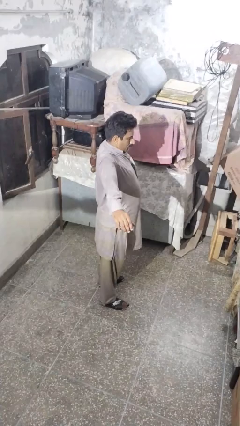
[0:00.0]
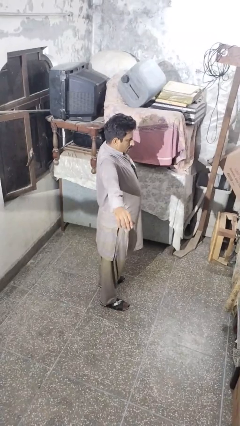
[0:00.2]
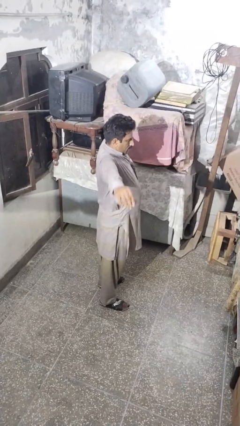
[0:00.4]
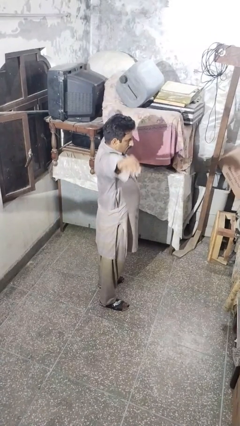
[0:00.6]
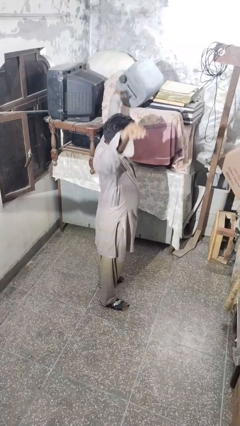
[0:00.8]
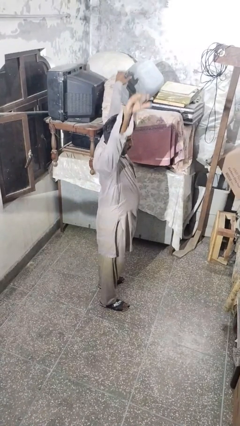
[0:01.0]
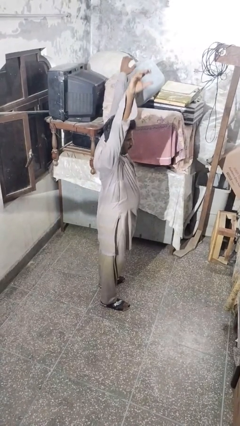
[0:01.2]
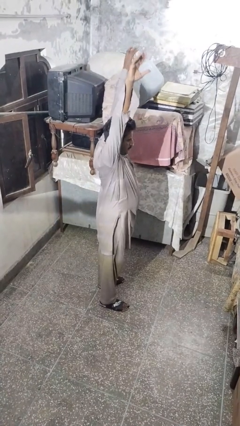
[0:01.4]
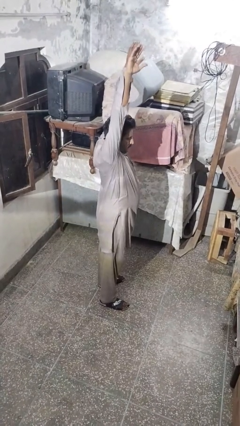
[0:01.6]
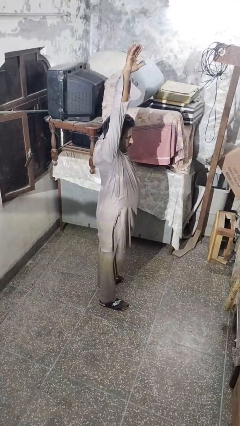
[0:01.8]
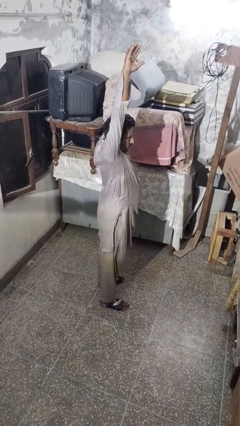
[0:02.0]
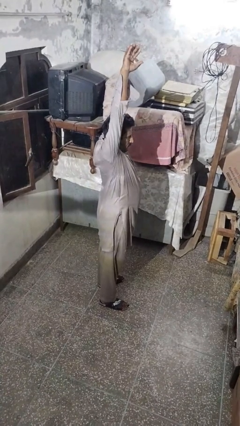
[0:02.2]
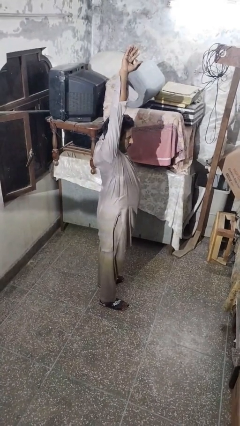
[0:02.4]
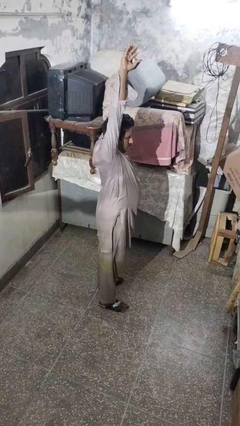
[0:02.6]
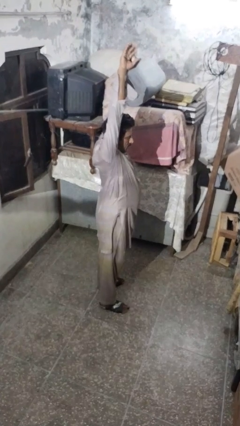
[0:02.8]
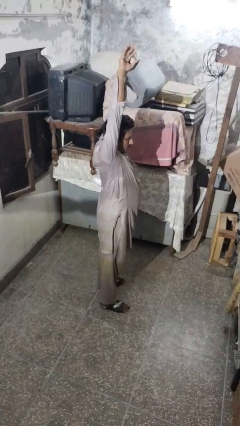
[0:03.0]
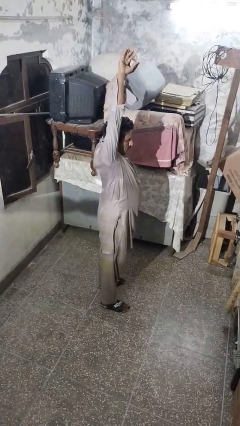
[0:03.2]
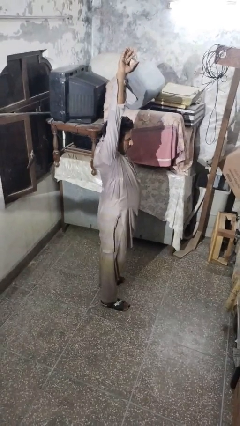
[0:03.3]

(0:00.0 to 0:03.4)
person stretches arms over head

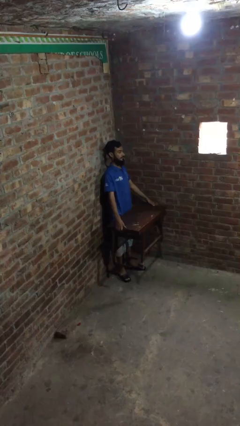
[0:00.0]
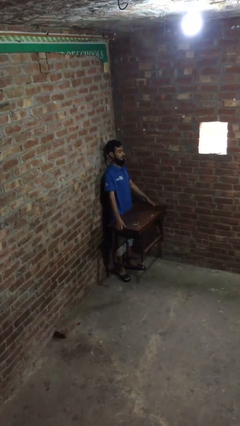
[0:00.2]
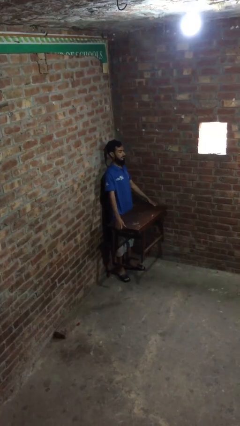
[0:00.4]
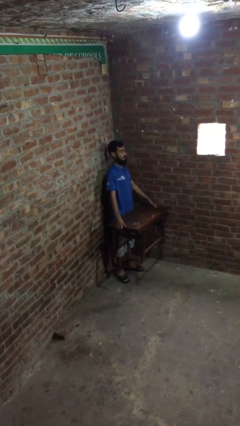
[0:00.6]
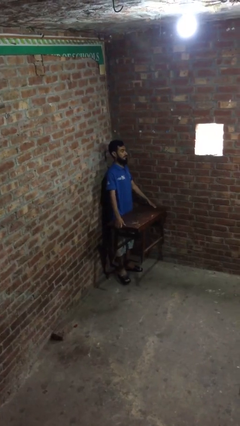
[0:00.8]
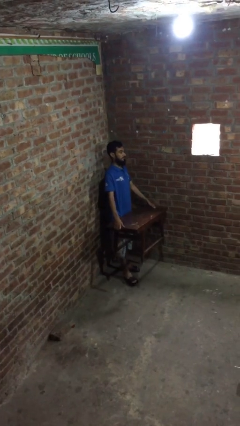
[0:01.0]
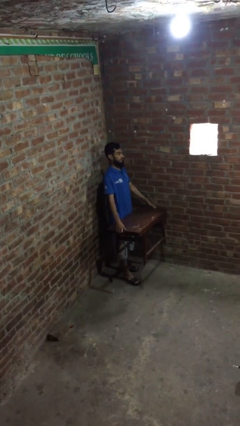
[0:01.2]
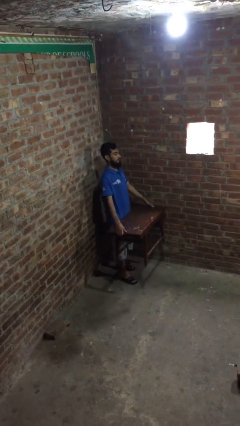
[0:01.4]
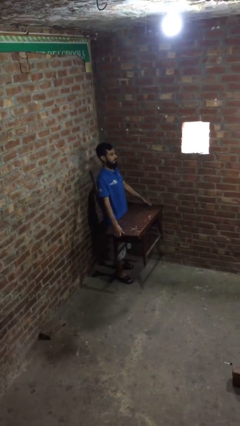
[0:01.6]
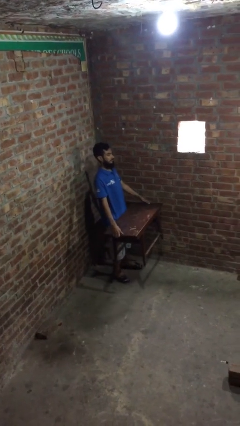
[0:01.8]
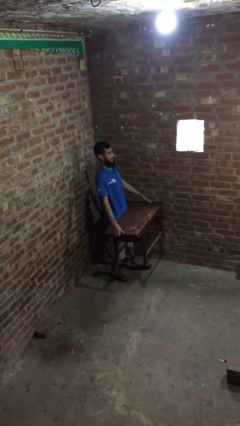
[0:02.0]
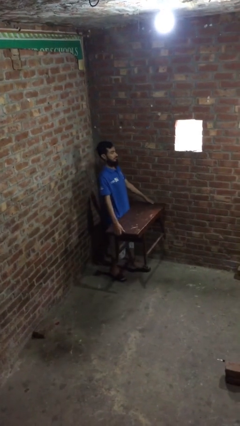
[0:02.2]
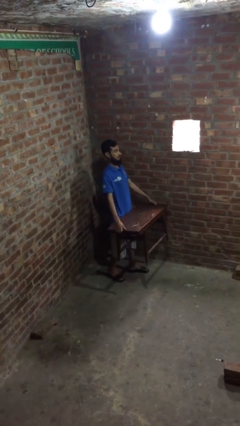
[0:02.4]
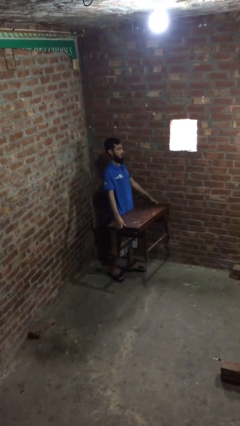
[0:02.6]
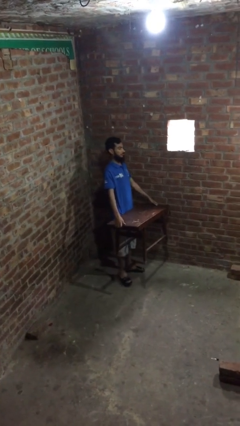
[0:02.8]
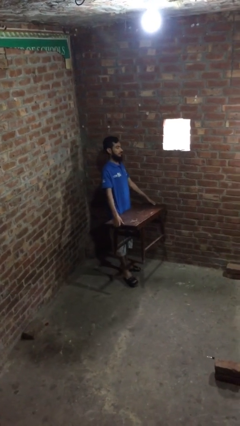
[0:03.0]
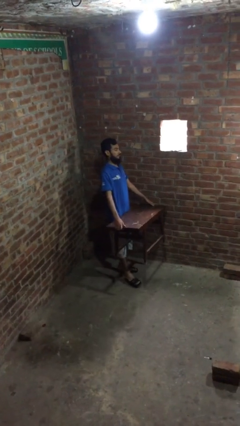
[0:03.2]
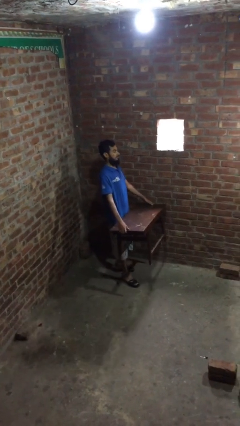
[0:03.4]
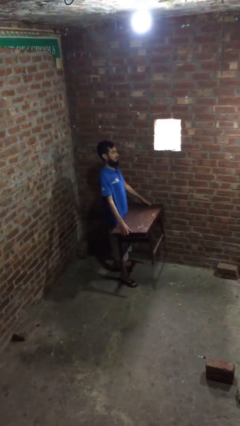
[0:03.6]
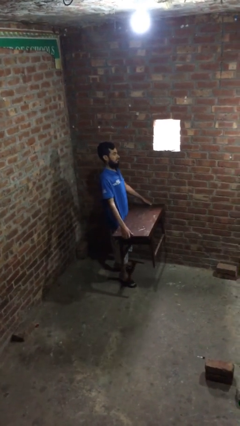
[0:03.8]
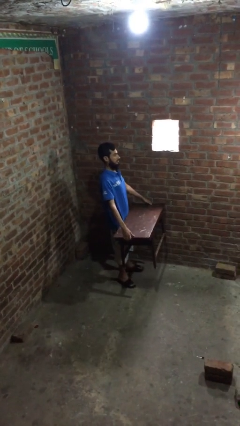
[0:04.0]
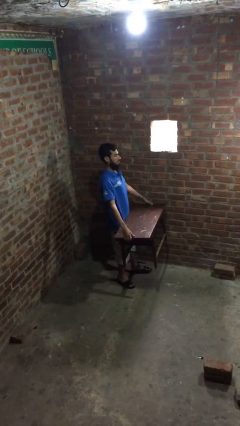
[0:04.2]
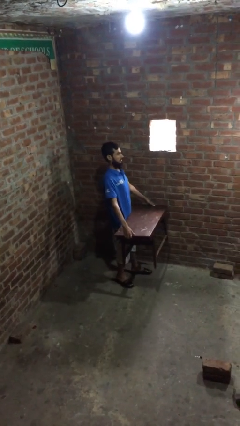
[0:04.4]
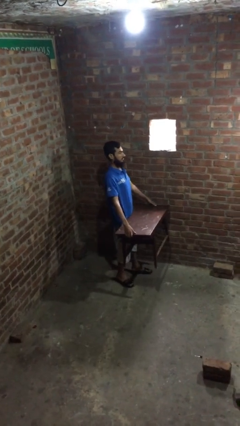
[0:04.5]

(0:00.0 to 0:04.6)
person carries heavy object

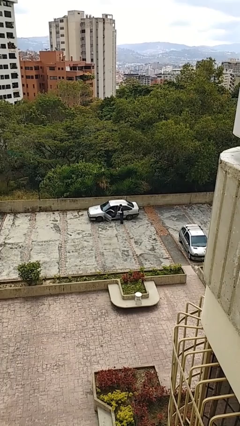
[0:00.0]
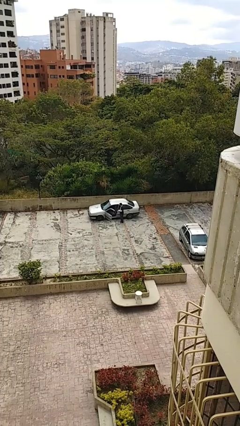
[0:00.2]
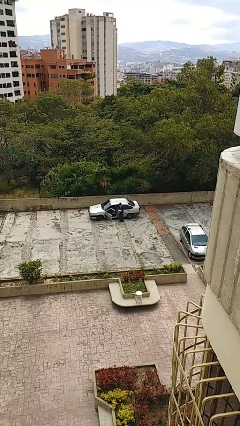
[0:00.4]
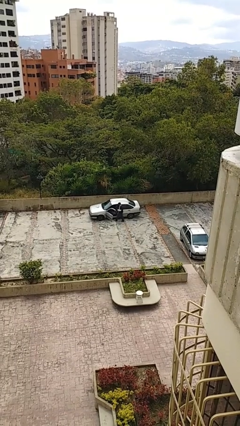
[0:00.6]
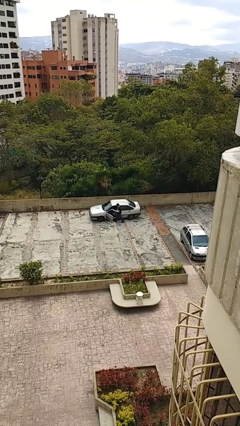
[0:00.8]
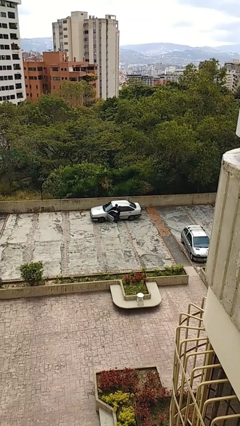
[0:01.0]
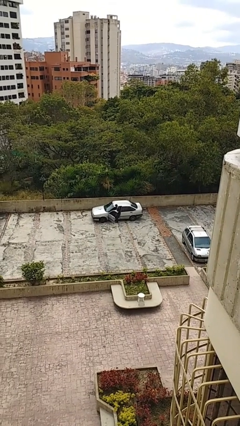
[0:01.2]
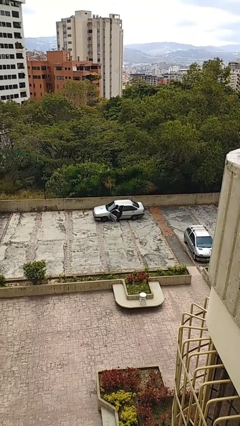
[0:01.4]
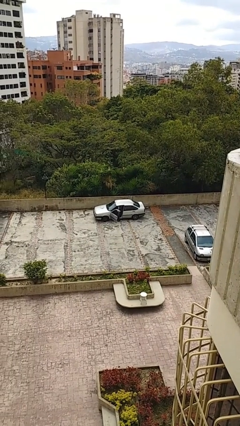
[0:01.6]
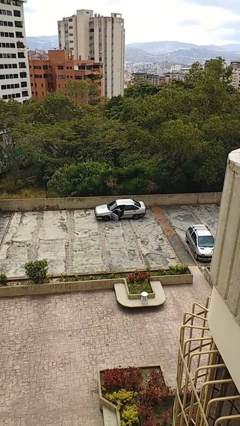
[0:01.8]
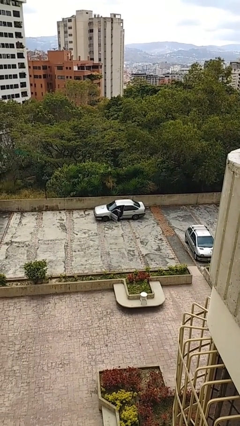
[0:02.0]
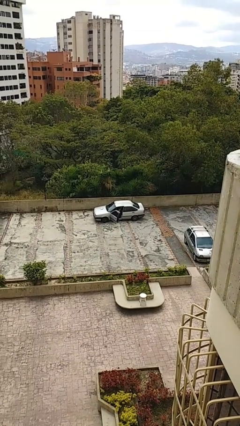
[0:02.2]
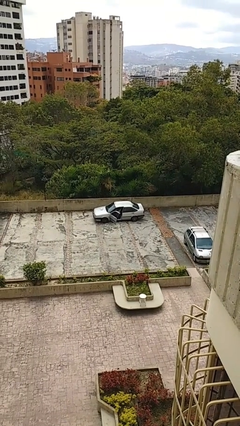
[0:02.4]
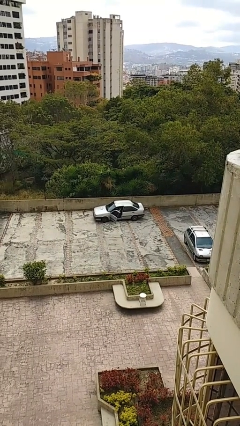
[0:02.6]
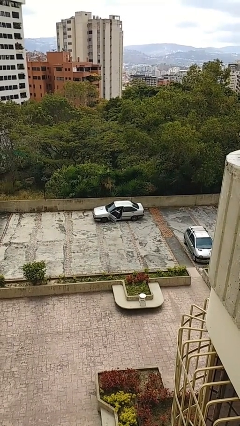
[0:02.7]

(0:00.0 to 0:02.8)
person enters car

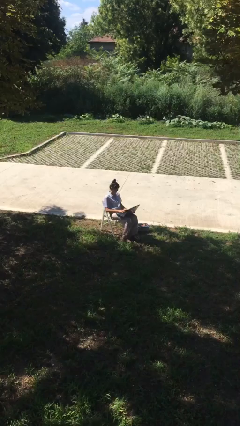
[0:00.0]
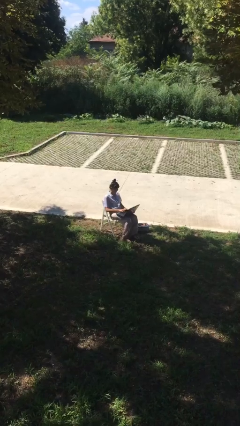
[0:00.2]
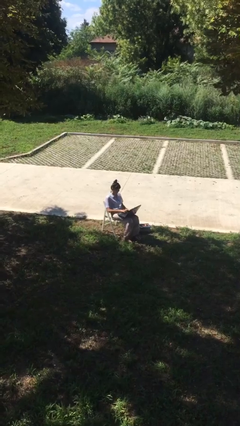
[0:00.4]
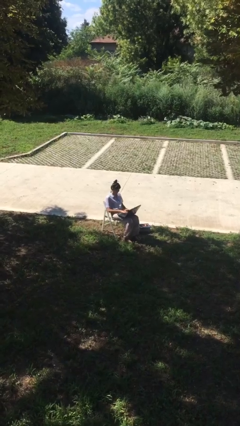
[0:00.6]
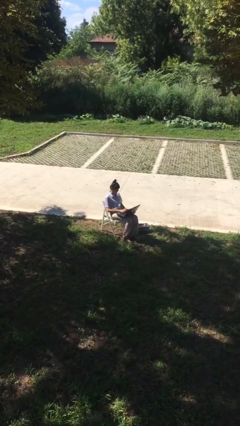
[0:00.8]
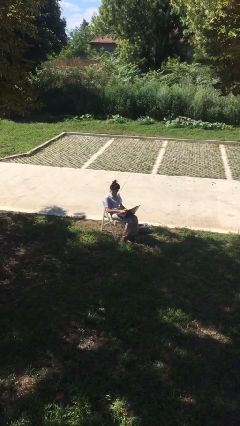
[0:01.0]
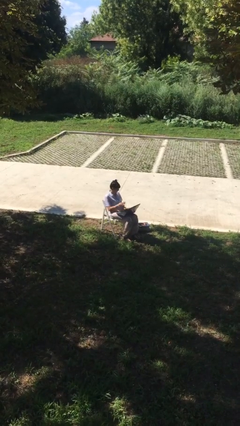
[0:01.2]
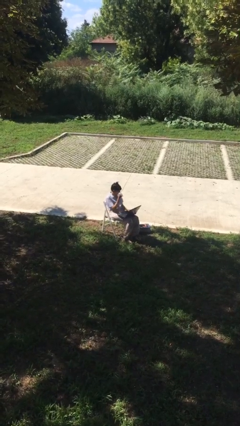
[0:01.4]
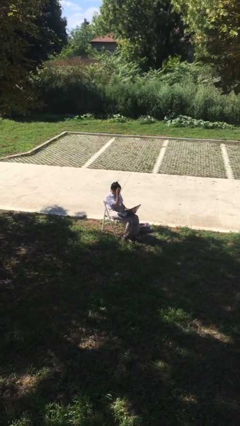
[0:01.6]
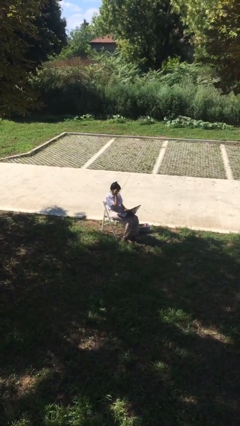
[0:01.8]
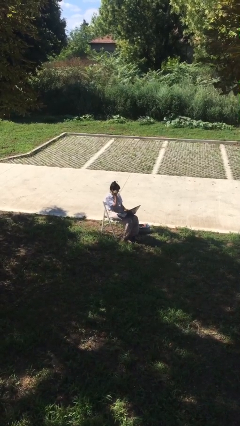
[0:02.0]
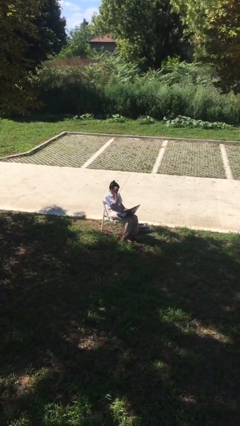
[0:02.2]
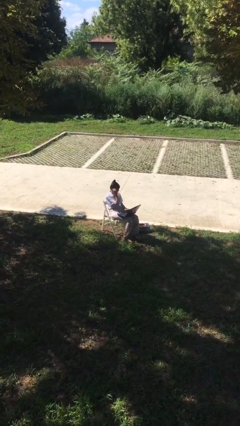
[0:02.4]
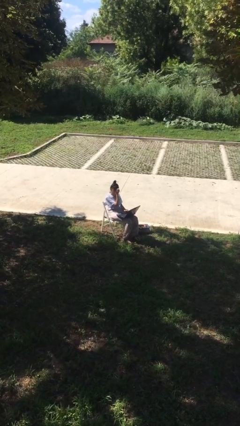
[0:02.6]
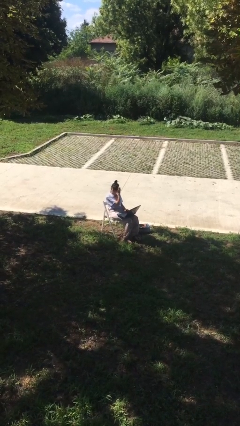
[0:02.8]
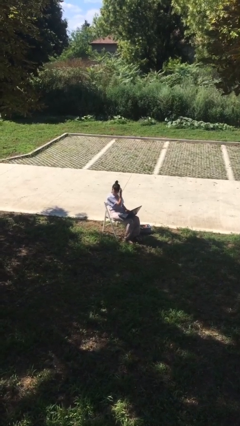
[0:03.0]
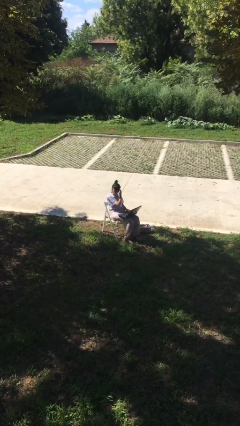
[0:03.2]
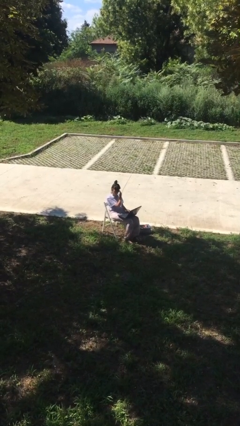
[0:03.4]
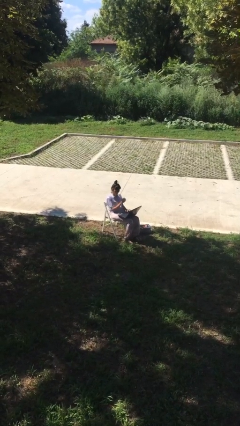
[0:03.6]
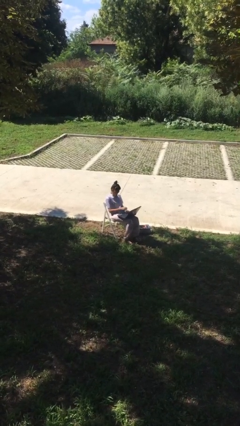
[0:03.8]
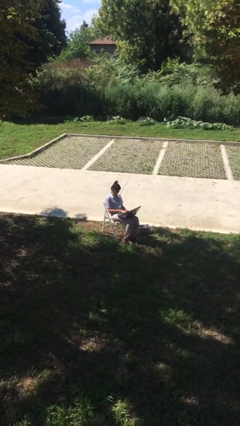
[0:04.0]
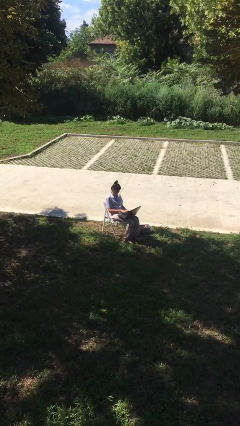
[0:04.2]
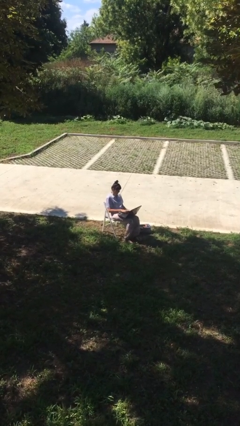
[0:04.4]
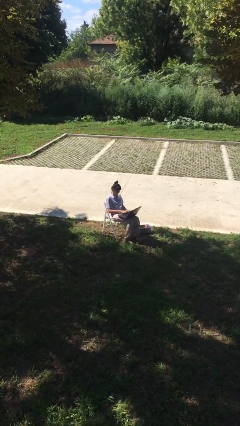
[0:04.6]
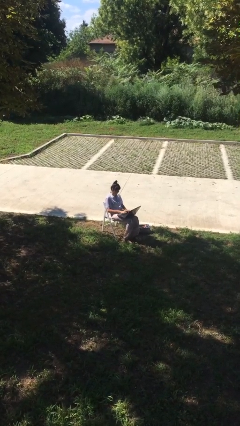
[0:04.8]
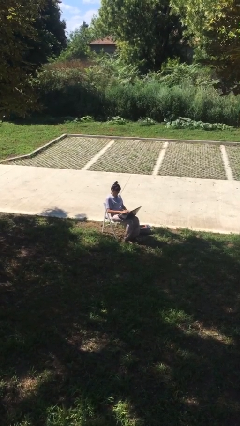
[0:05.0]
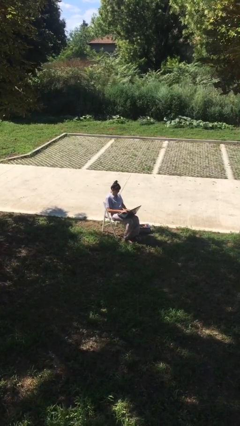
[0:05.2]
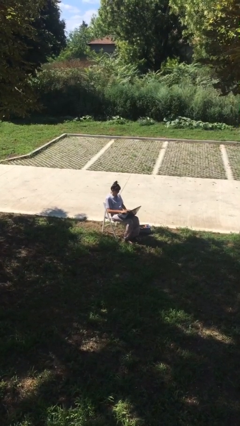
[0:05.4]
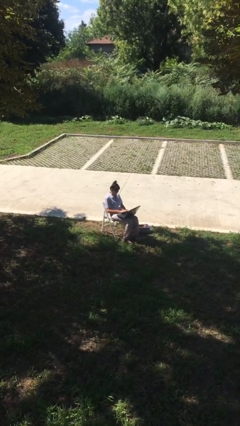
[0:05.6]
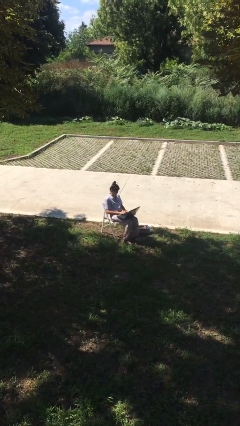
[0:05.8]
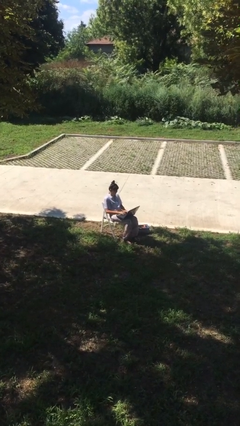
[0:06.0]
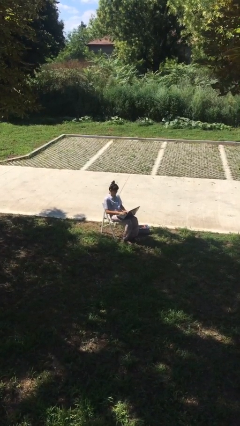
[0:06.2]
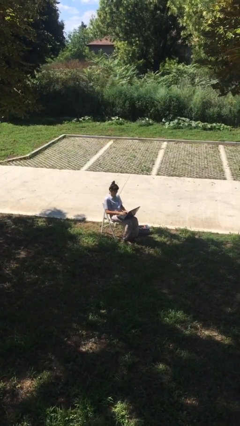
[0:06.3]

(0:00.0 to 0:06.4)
person interacts with laptop

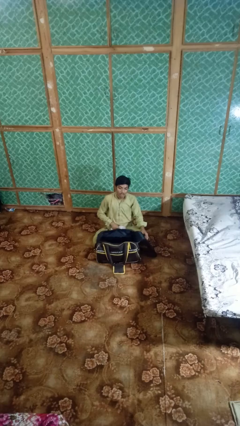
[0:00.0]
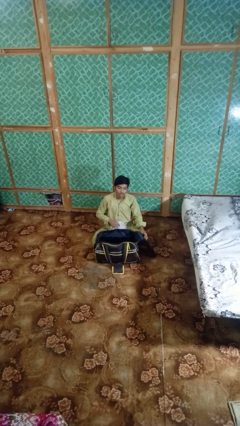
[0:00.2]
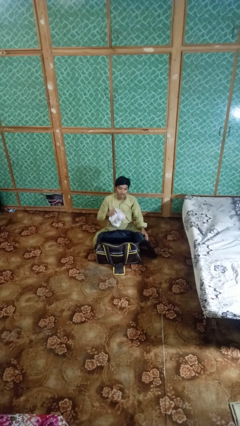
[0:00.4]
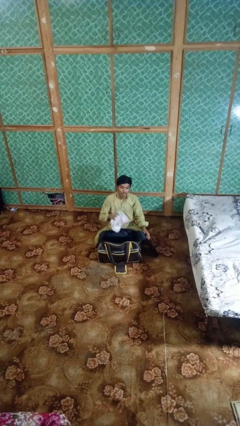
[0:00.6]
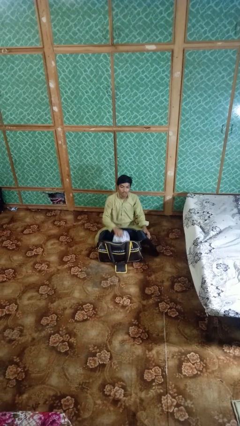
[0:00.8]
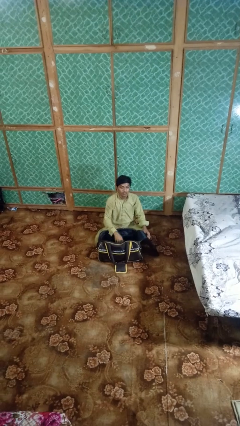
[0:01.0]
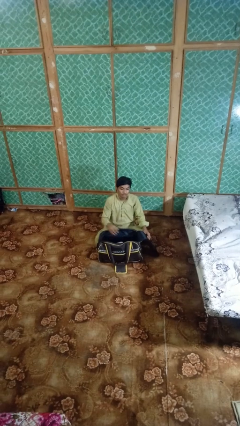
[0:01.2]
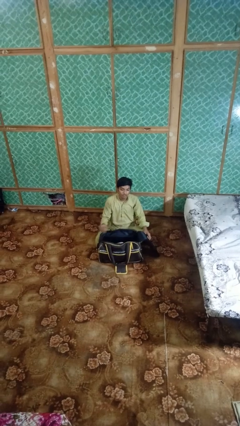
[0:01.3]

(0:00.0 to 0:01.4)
person puts object into bag
